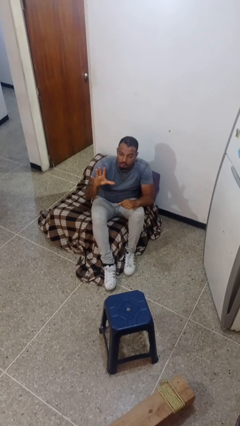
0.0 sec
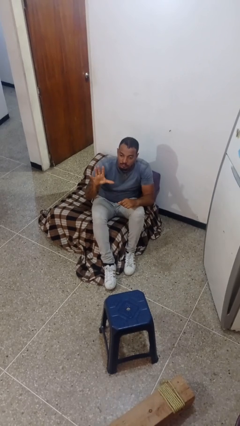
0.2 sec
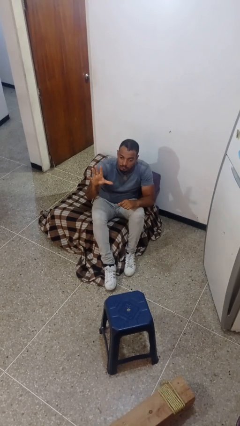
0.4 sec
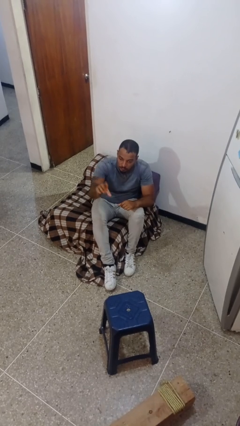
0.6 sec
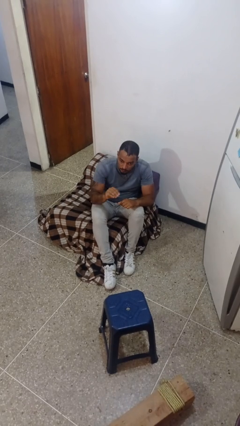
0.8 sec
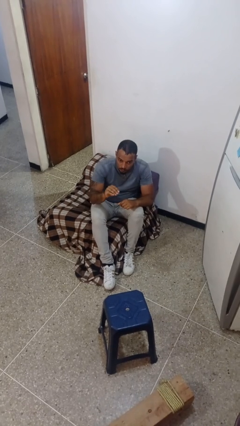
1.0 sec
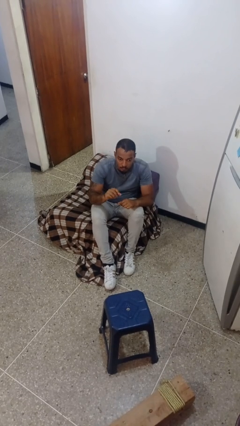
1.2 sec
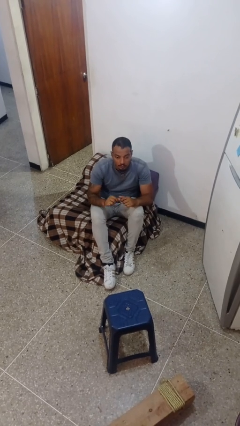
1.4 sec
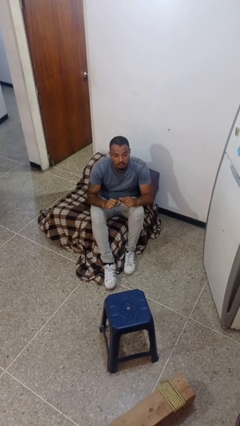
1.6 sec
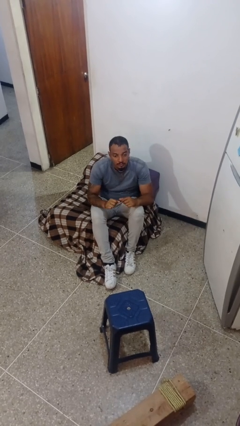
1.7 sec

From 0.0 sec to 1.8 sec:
person gestures zoom out

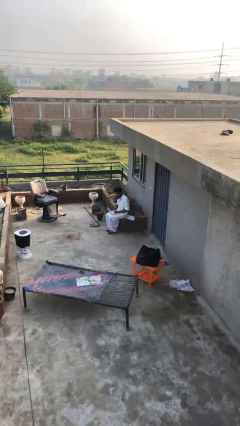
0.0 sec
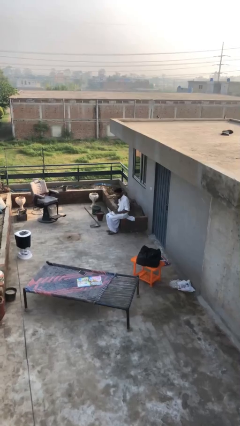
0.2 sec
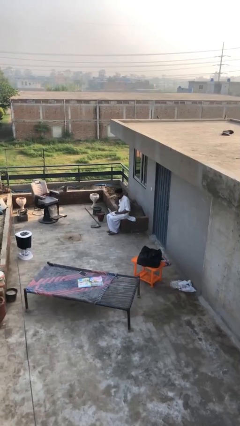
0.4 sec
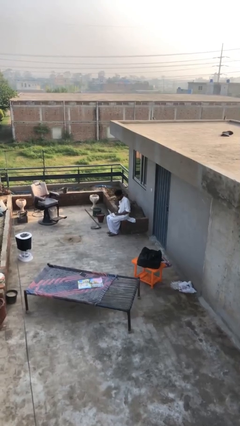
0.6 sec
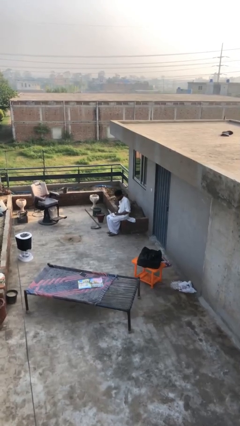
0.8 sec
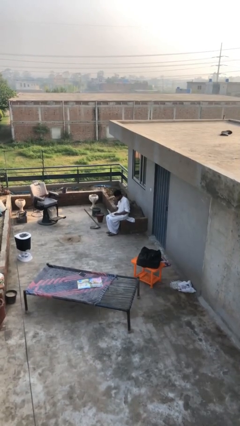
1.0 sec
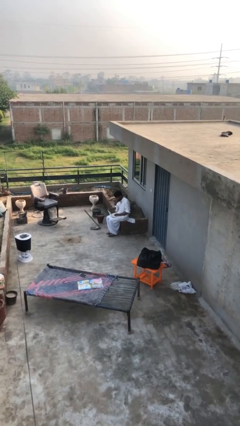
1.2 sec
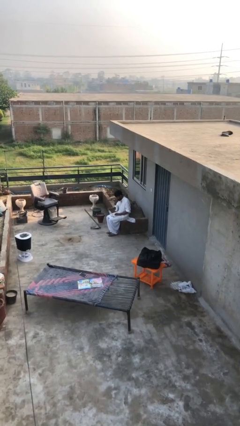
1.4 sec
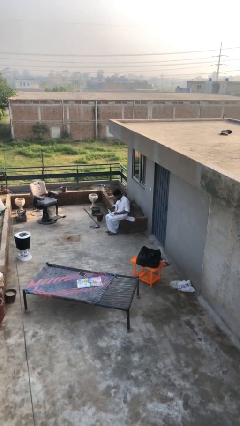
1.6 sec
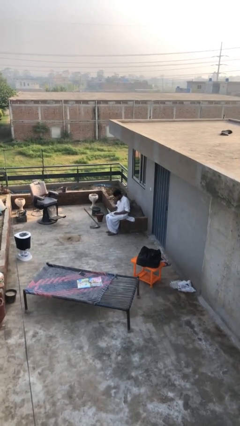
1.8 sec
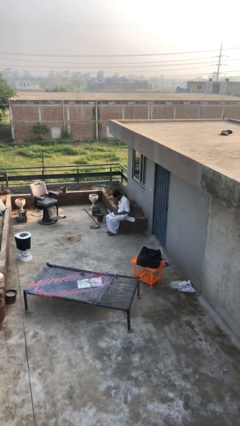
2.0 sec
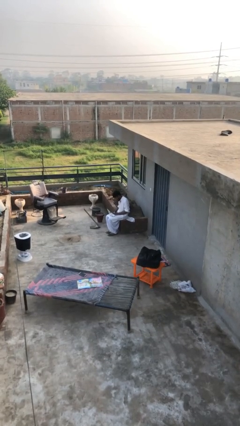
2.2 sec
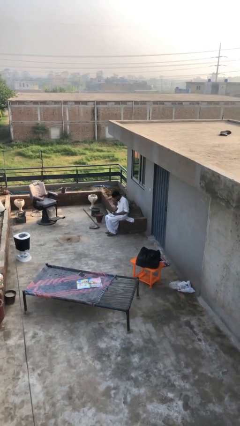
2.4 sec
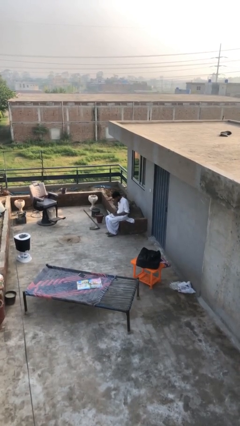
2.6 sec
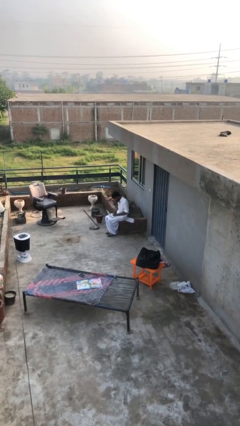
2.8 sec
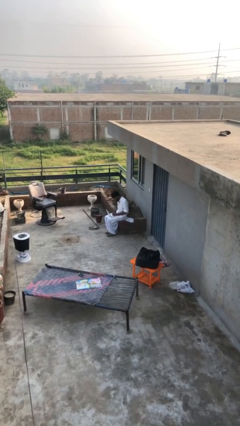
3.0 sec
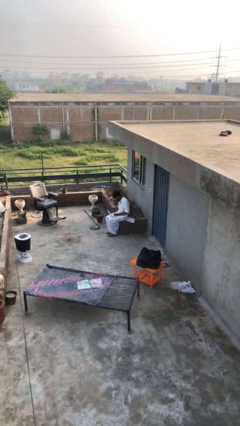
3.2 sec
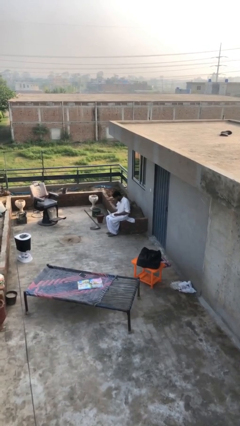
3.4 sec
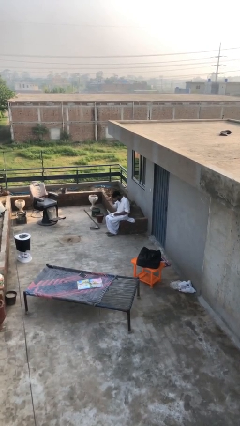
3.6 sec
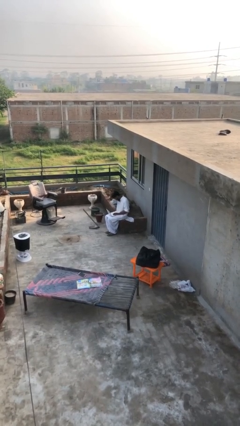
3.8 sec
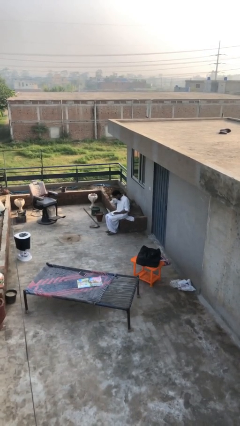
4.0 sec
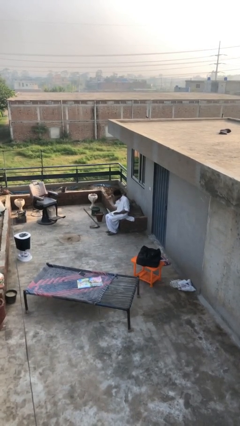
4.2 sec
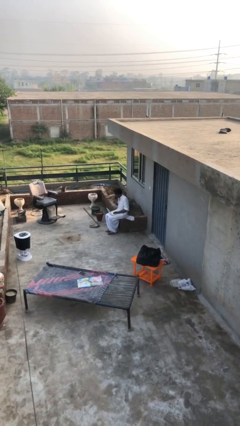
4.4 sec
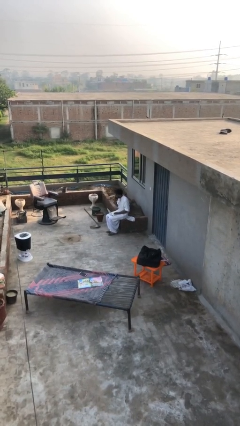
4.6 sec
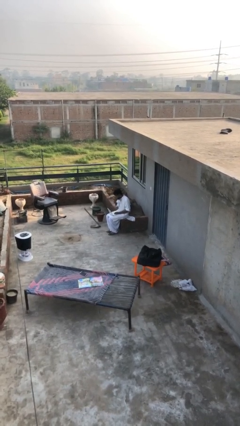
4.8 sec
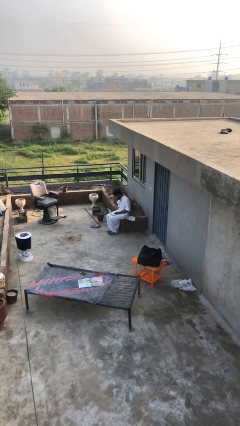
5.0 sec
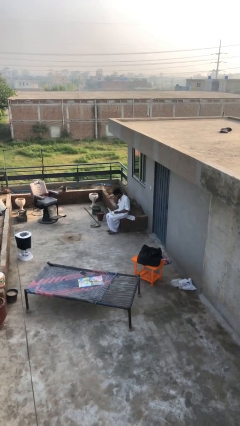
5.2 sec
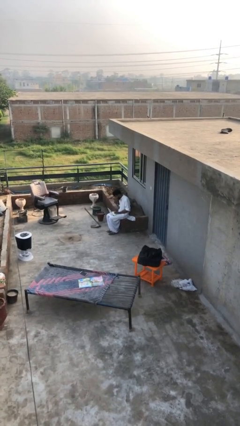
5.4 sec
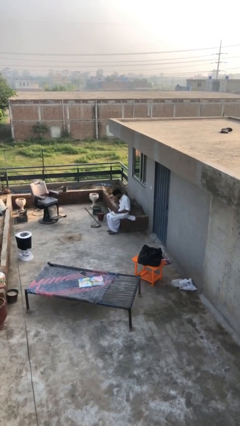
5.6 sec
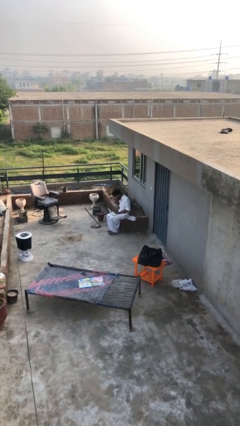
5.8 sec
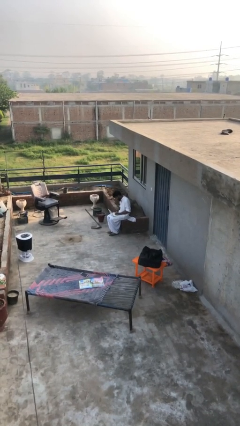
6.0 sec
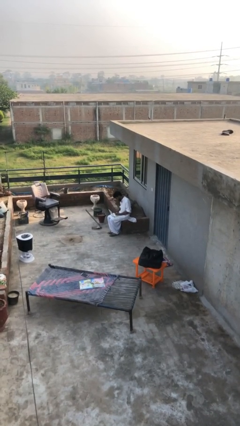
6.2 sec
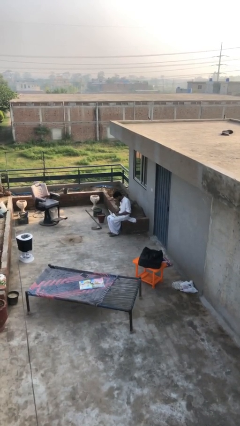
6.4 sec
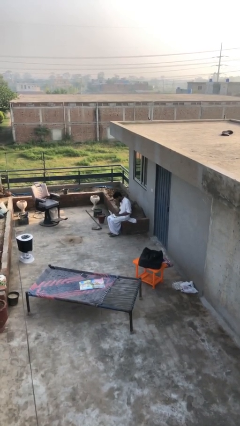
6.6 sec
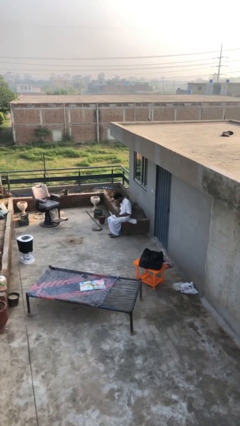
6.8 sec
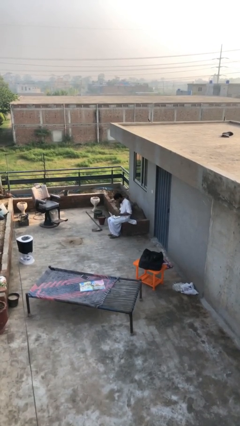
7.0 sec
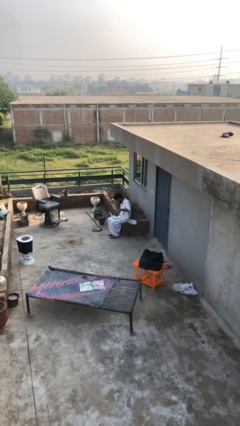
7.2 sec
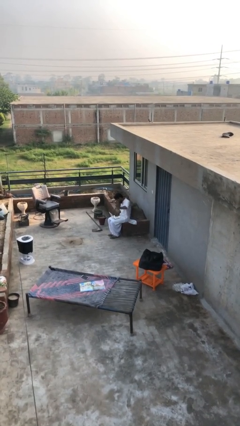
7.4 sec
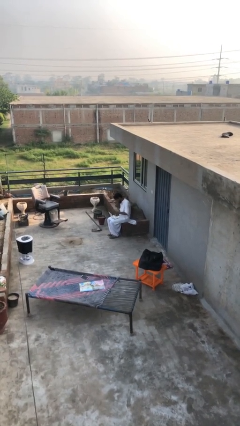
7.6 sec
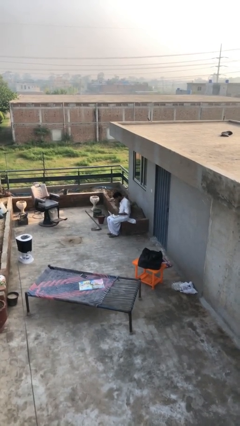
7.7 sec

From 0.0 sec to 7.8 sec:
person interacts with laptop

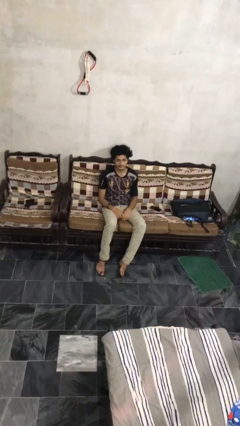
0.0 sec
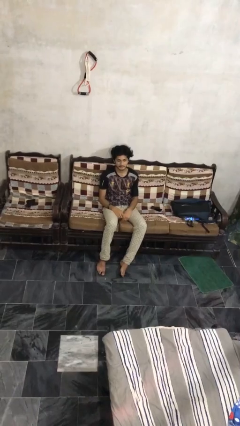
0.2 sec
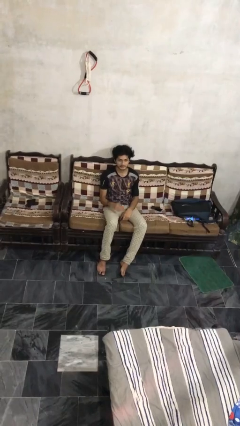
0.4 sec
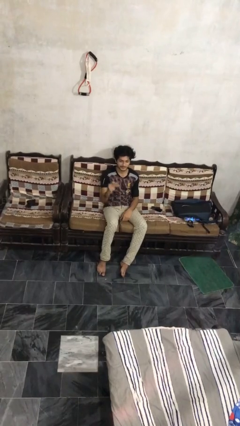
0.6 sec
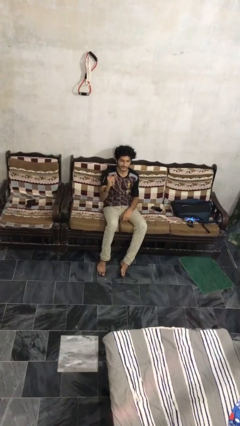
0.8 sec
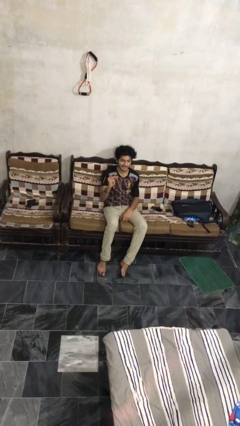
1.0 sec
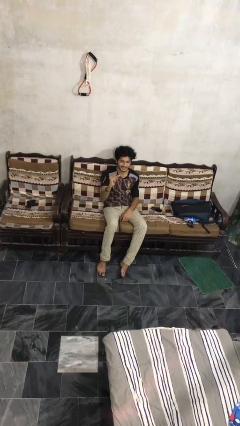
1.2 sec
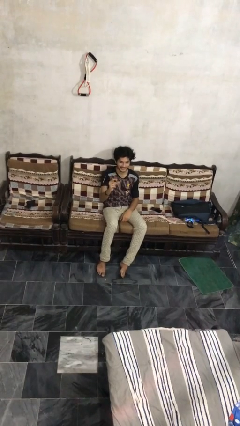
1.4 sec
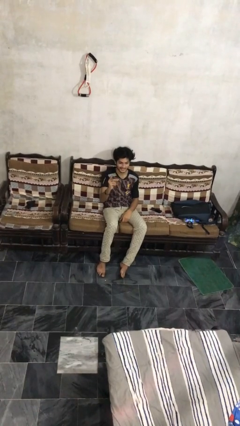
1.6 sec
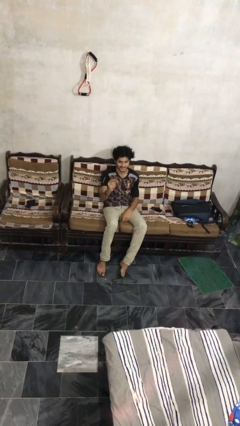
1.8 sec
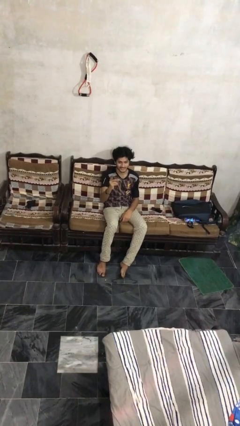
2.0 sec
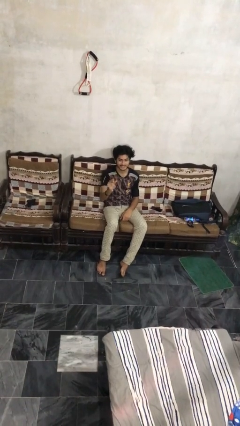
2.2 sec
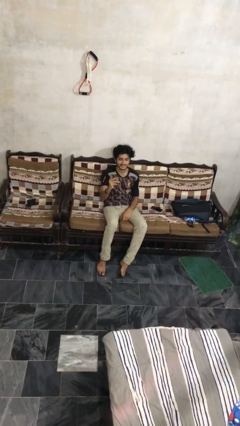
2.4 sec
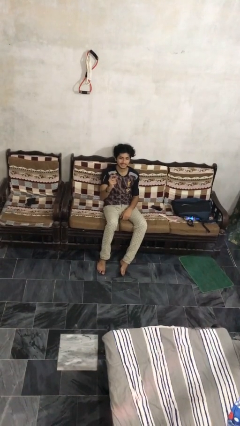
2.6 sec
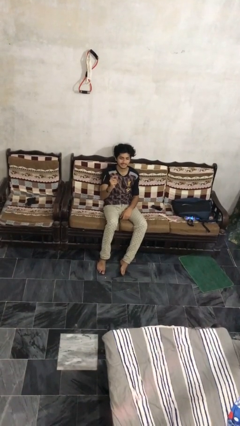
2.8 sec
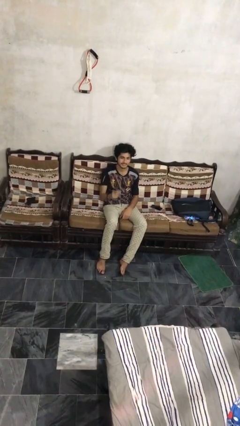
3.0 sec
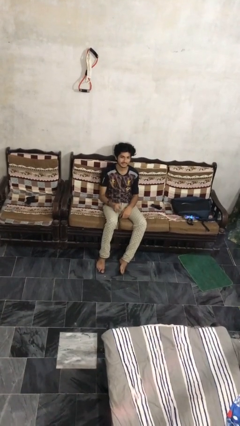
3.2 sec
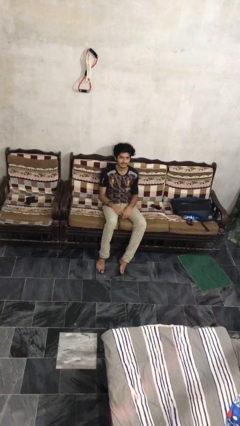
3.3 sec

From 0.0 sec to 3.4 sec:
person snaps fingers

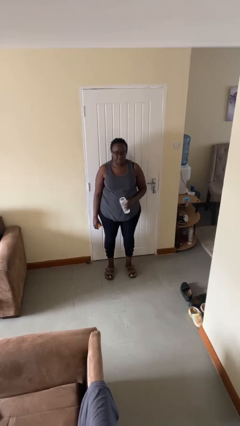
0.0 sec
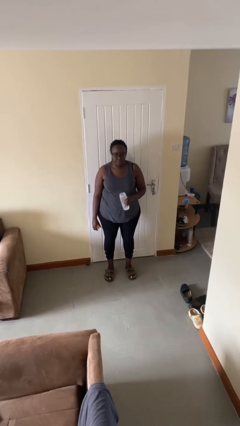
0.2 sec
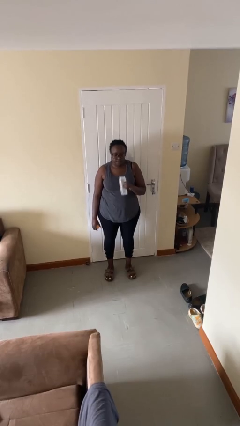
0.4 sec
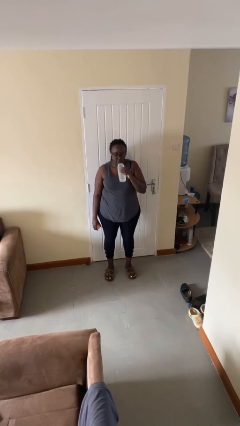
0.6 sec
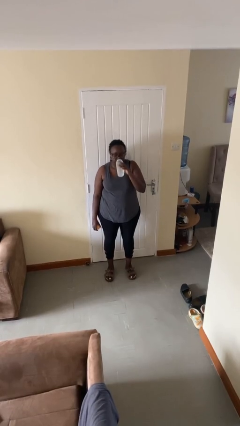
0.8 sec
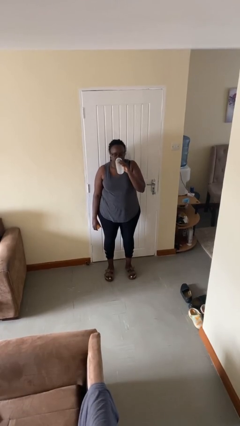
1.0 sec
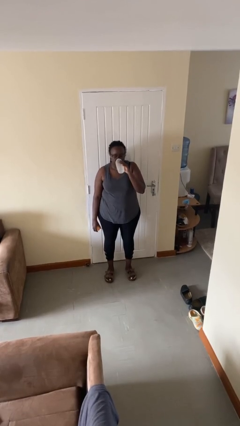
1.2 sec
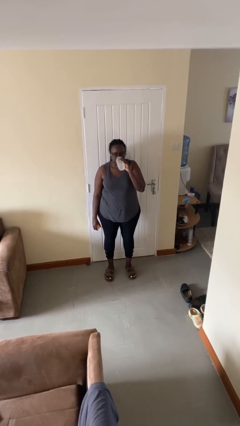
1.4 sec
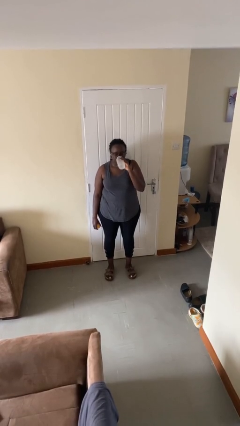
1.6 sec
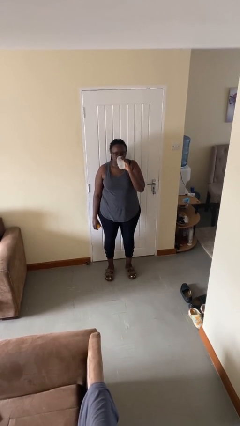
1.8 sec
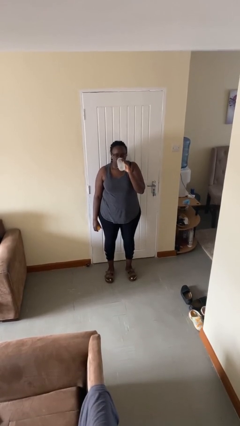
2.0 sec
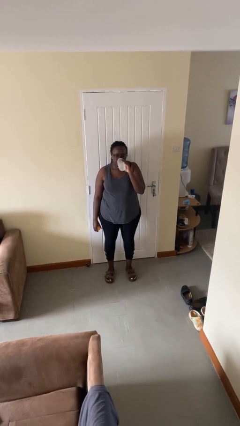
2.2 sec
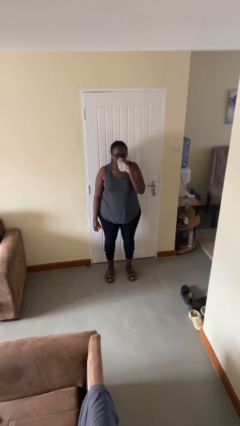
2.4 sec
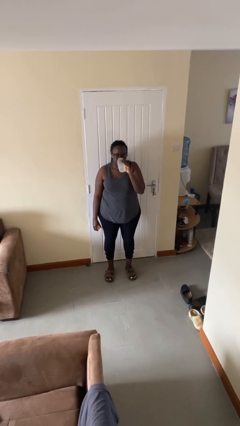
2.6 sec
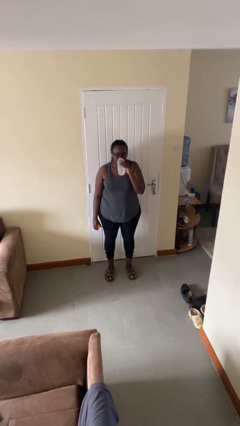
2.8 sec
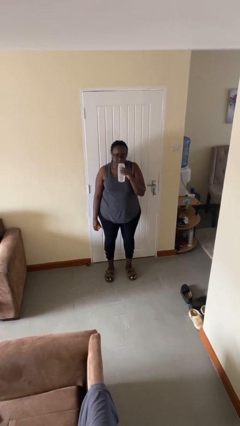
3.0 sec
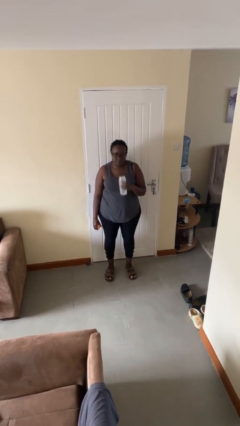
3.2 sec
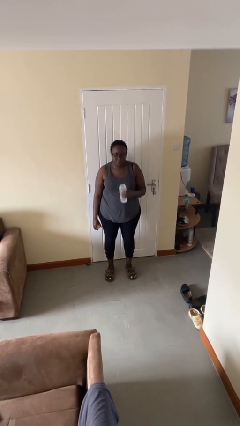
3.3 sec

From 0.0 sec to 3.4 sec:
person drinks from bottle

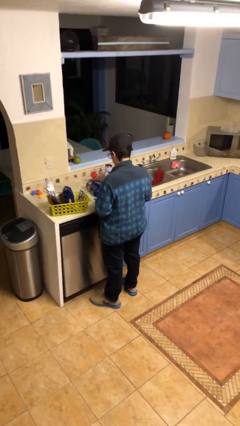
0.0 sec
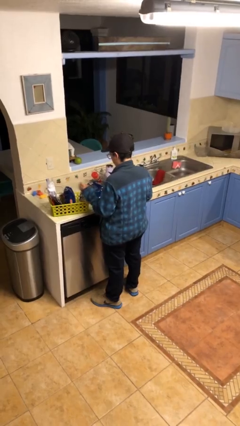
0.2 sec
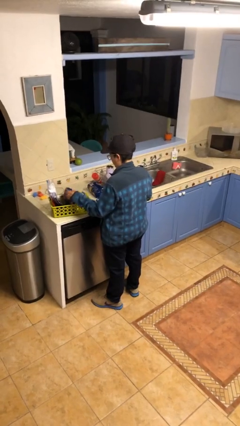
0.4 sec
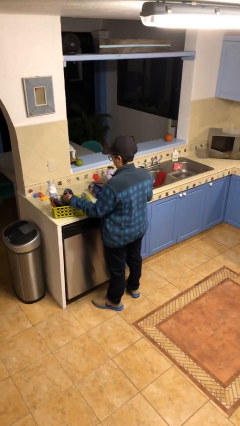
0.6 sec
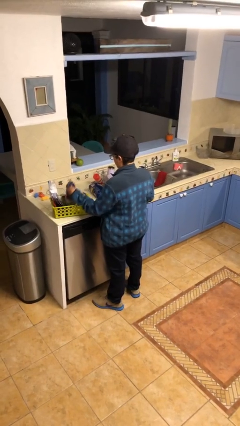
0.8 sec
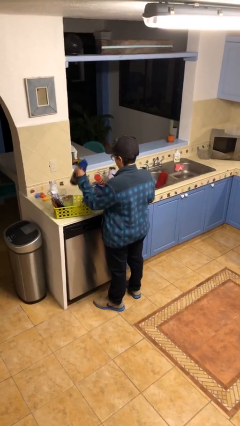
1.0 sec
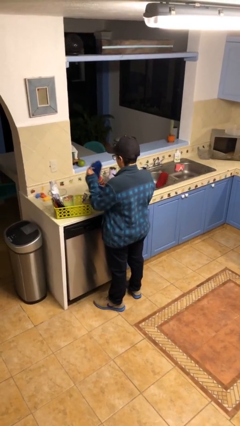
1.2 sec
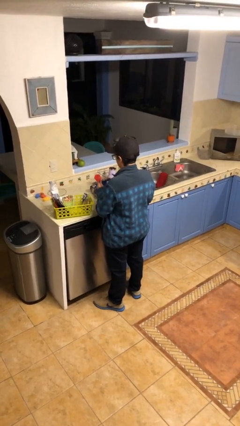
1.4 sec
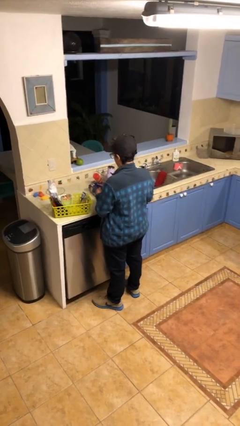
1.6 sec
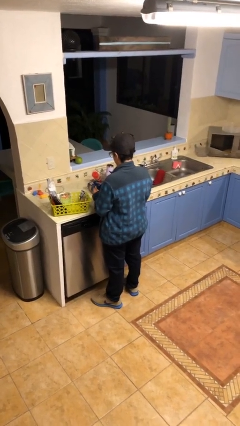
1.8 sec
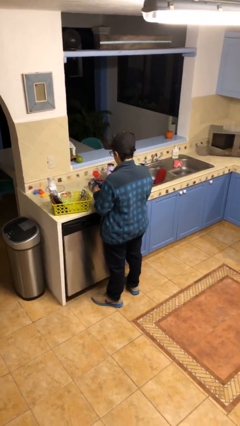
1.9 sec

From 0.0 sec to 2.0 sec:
person takes object from basket
